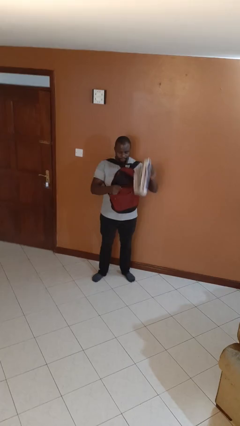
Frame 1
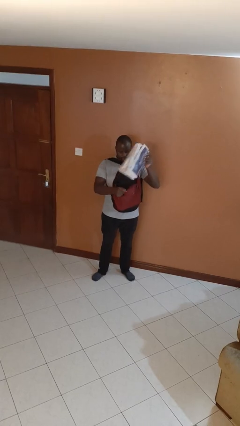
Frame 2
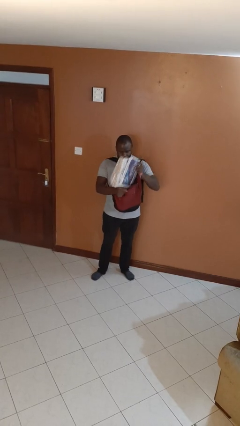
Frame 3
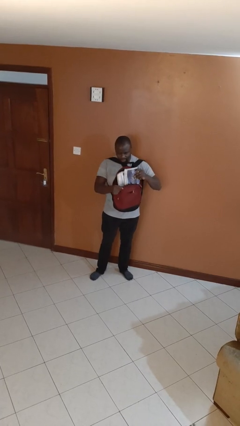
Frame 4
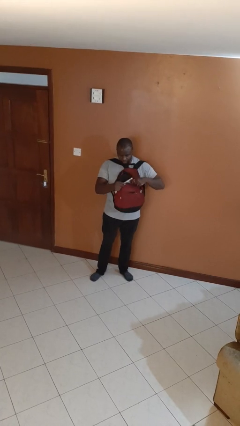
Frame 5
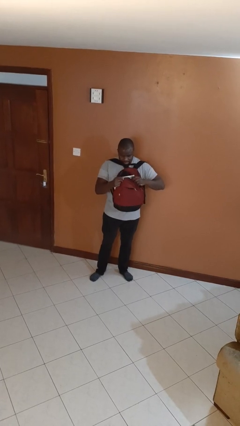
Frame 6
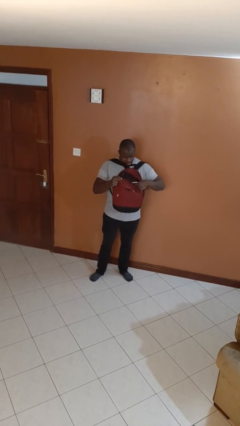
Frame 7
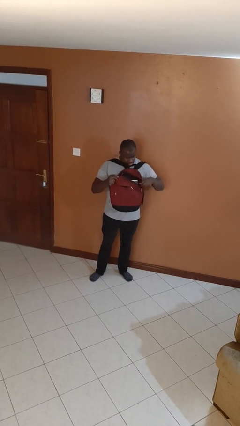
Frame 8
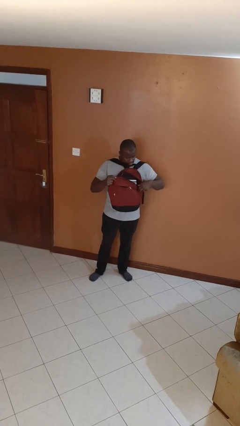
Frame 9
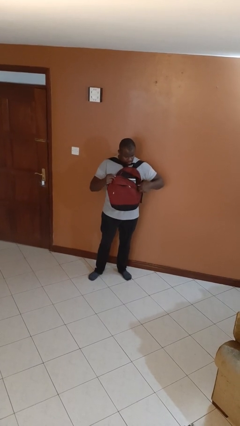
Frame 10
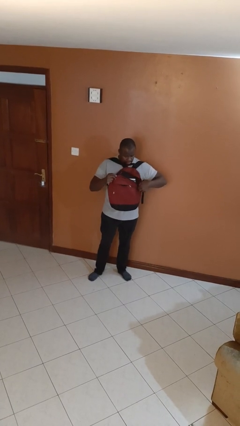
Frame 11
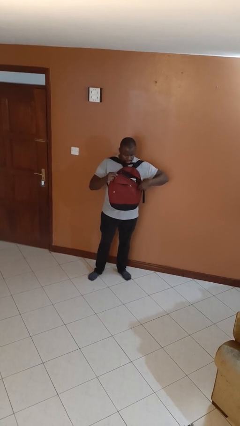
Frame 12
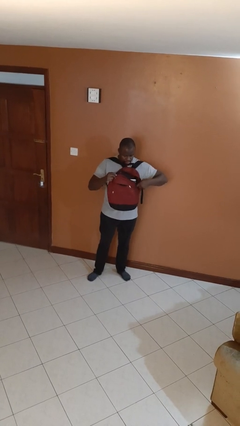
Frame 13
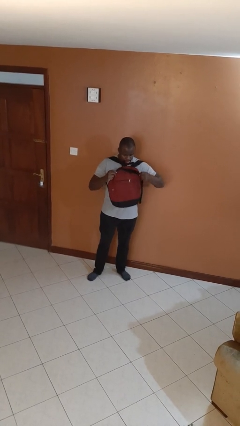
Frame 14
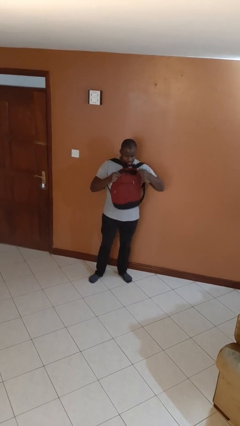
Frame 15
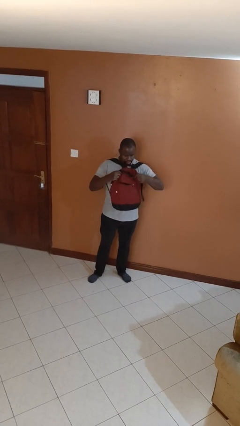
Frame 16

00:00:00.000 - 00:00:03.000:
person puts object into backpack

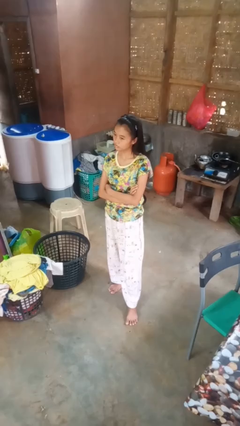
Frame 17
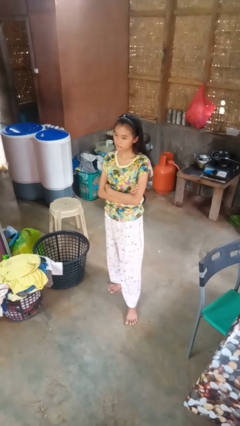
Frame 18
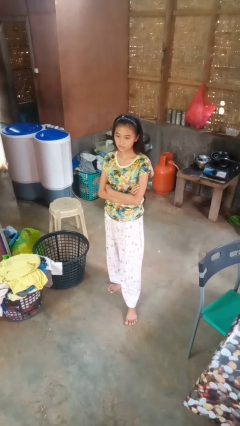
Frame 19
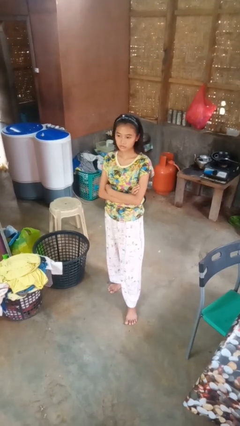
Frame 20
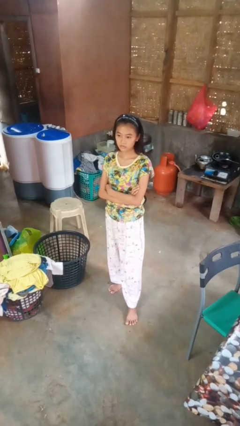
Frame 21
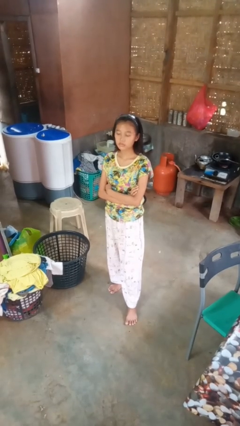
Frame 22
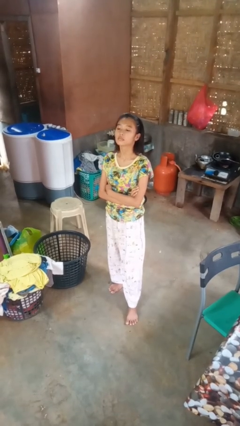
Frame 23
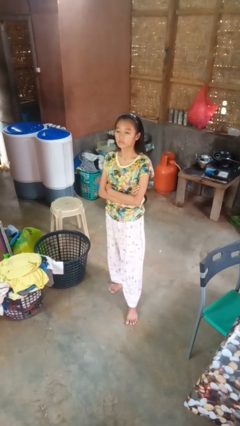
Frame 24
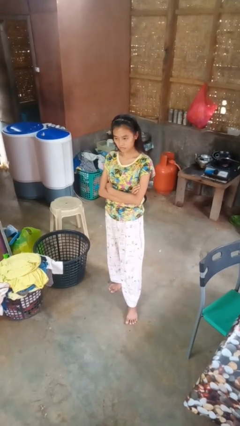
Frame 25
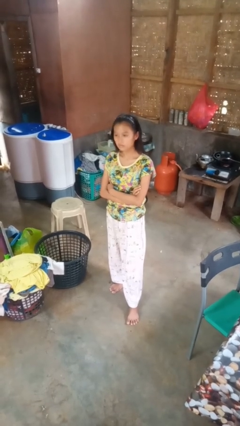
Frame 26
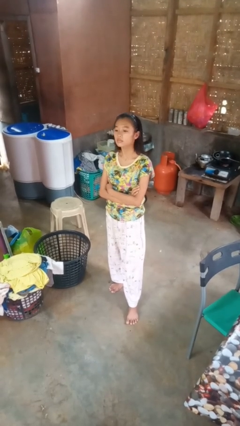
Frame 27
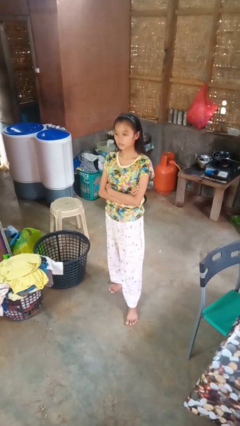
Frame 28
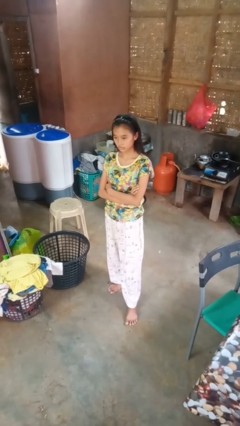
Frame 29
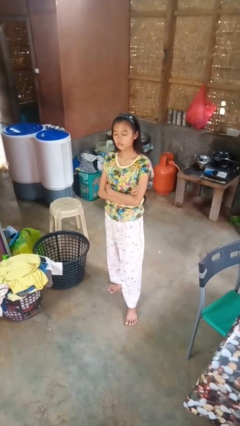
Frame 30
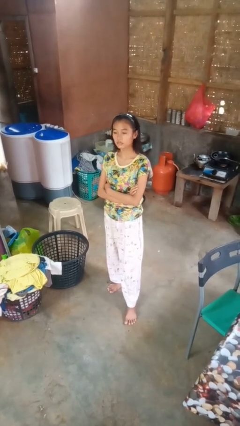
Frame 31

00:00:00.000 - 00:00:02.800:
person nods head

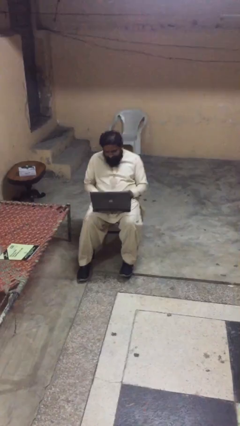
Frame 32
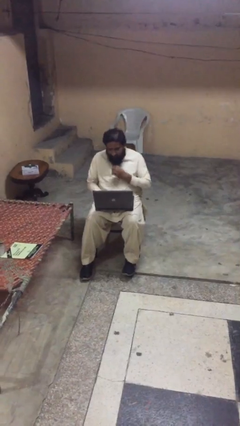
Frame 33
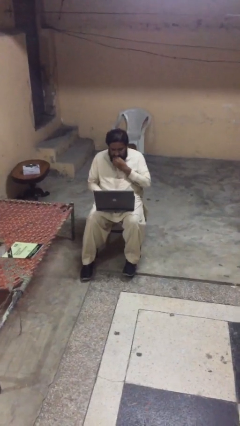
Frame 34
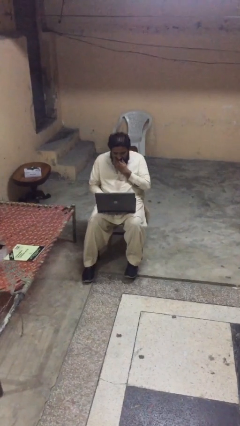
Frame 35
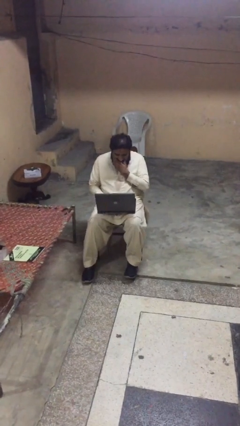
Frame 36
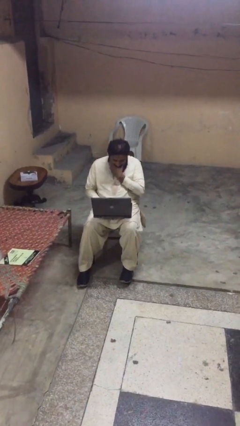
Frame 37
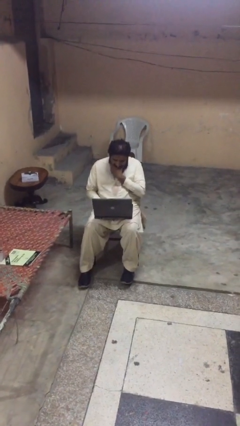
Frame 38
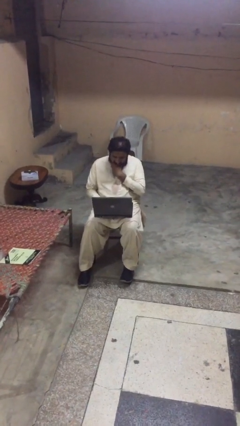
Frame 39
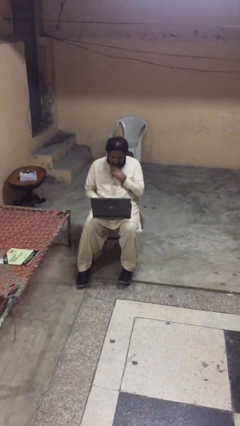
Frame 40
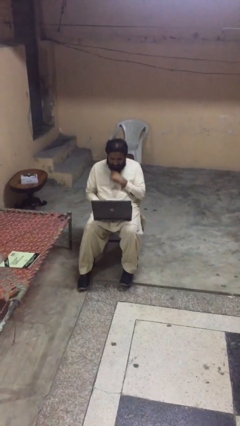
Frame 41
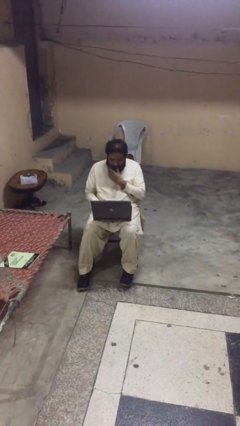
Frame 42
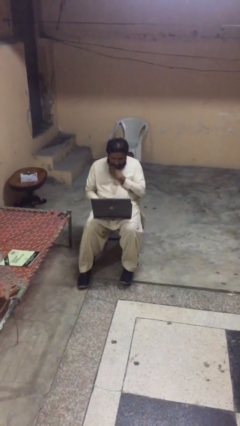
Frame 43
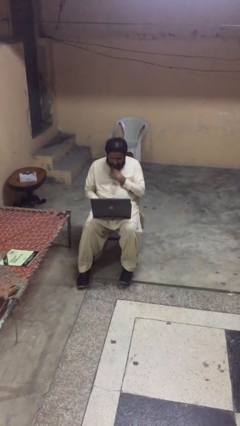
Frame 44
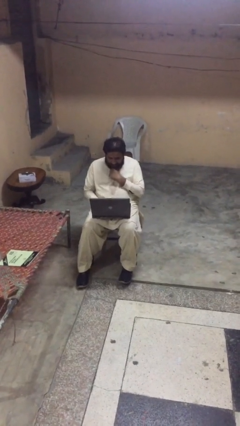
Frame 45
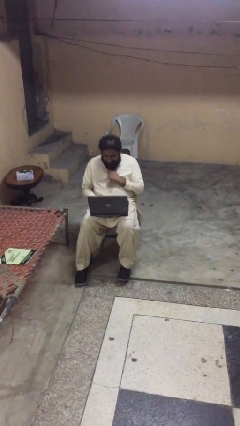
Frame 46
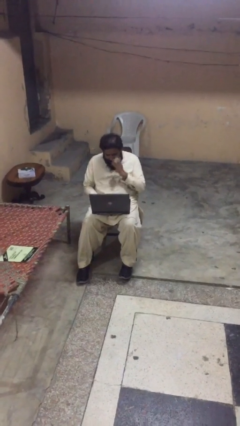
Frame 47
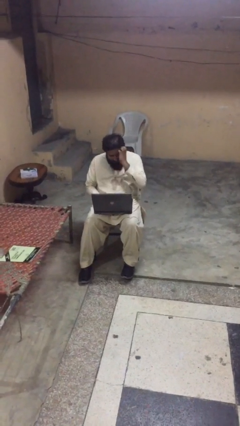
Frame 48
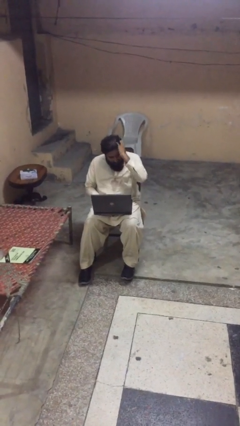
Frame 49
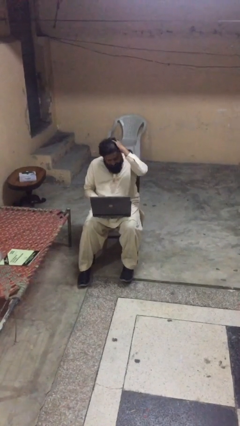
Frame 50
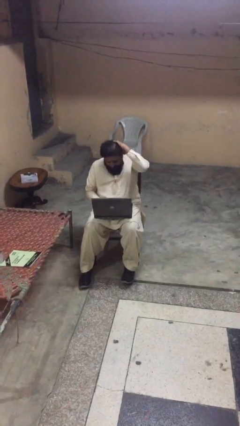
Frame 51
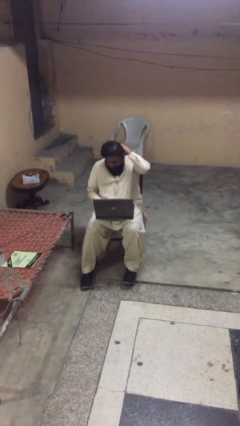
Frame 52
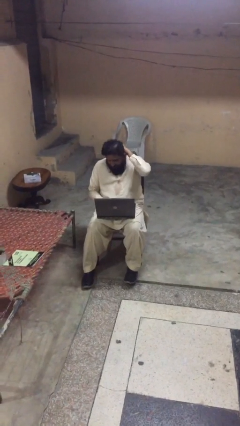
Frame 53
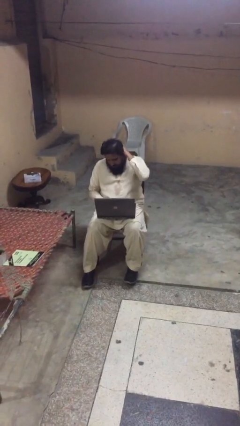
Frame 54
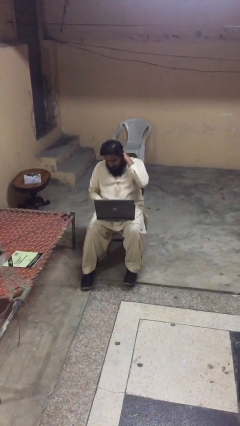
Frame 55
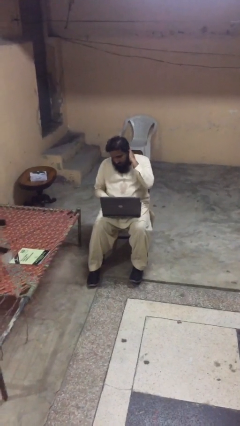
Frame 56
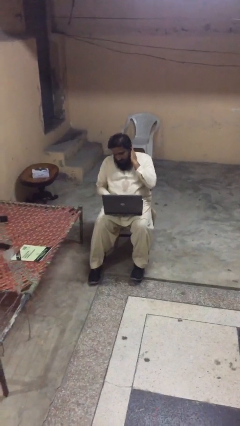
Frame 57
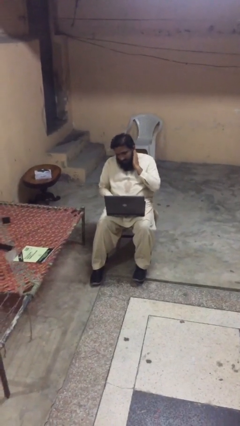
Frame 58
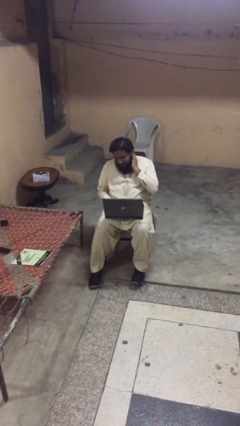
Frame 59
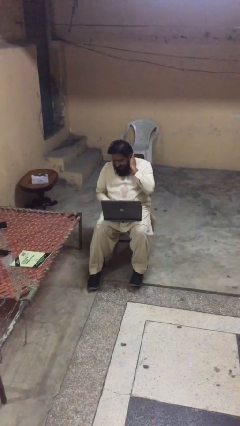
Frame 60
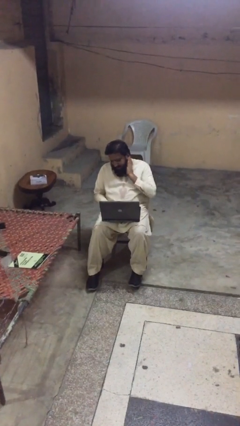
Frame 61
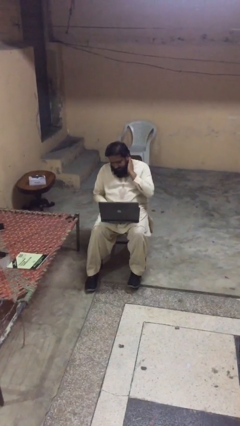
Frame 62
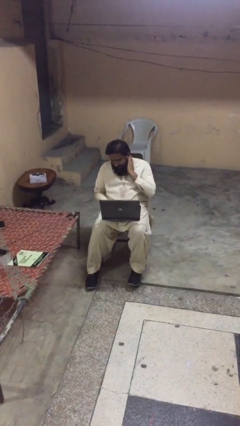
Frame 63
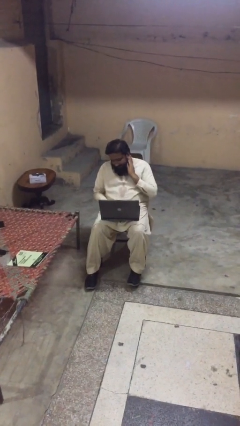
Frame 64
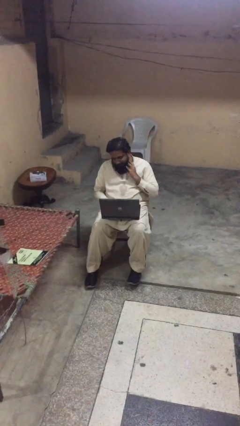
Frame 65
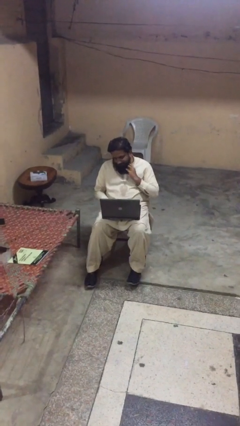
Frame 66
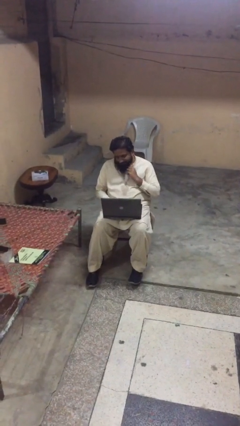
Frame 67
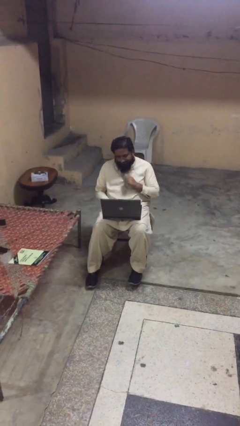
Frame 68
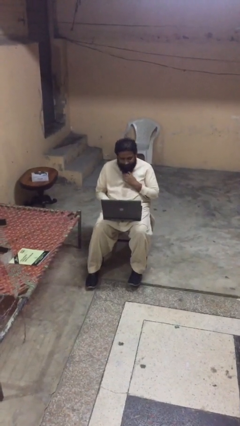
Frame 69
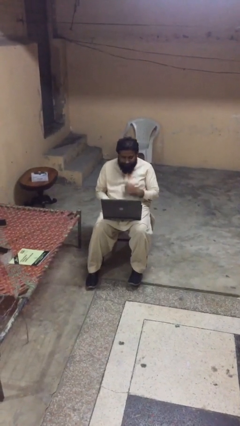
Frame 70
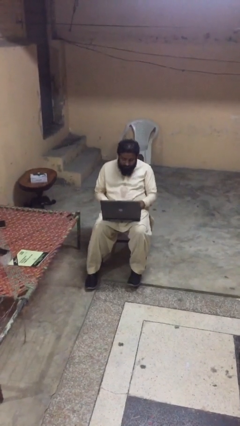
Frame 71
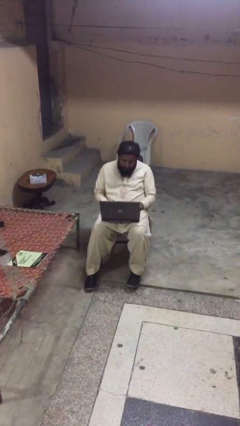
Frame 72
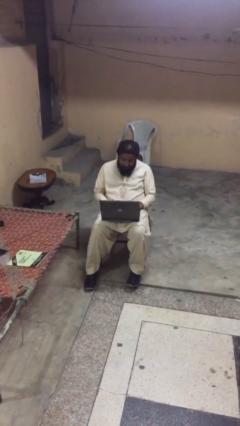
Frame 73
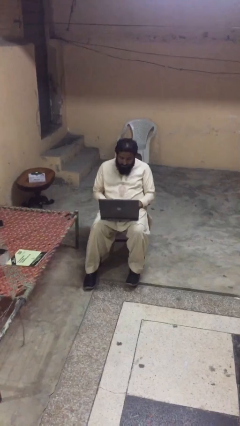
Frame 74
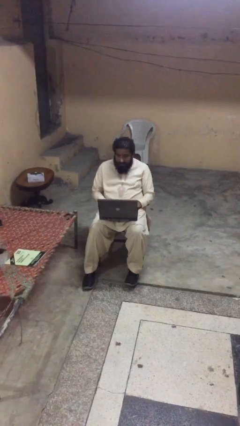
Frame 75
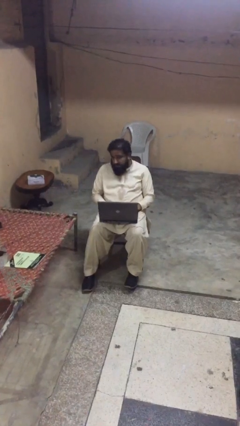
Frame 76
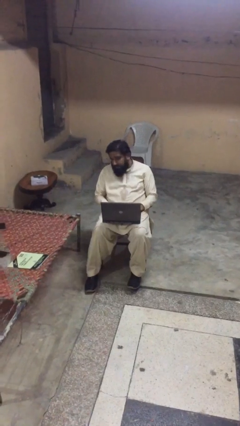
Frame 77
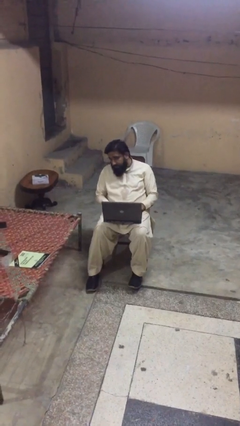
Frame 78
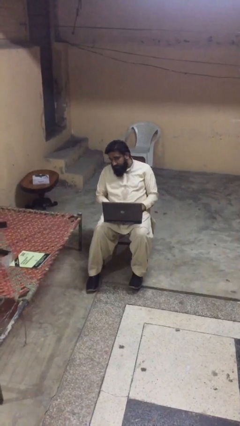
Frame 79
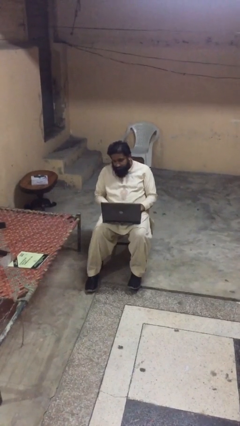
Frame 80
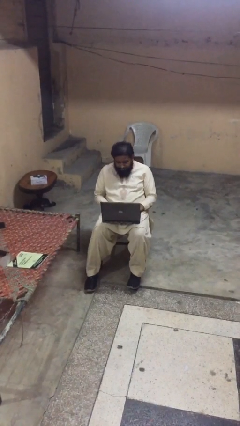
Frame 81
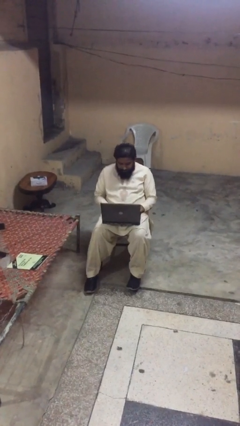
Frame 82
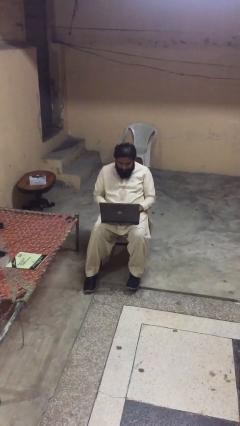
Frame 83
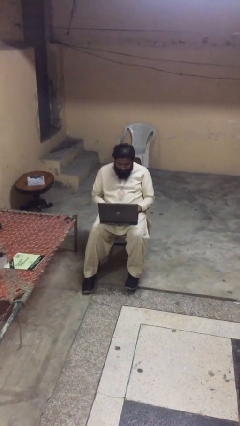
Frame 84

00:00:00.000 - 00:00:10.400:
person interacts with laptop

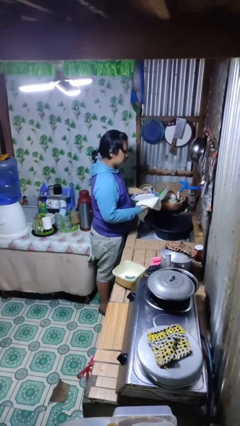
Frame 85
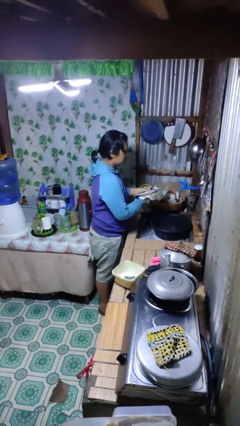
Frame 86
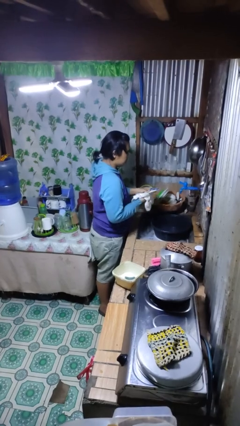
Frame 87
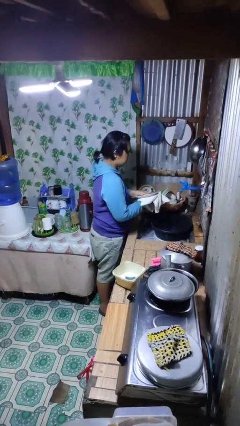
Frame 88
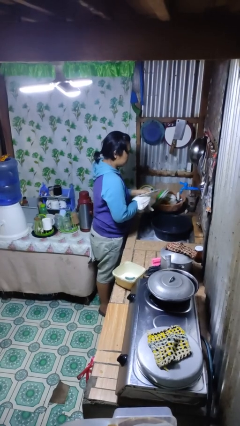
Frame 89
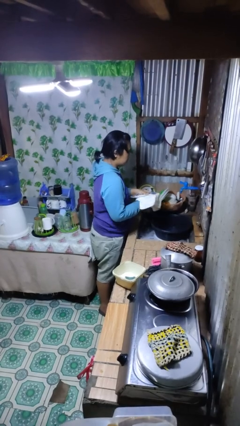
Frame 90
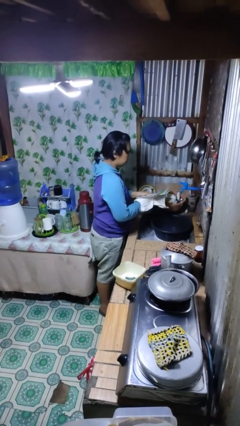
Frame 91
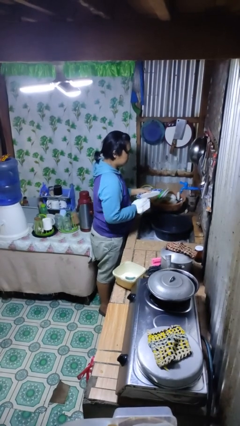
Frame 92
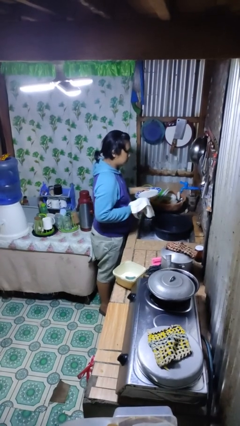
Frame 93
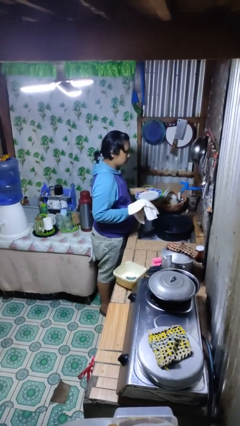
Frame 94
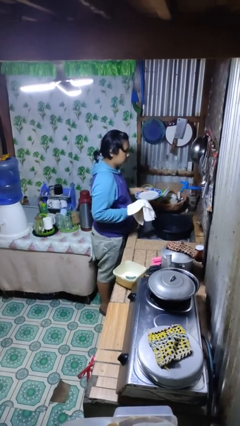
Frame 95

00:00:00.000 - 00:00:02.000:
person dries dish
